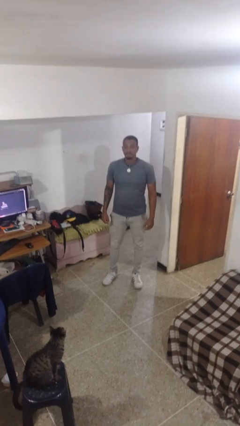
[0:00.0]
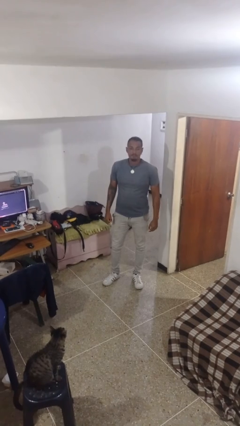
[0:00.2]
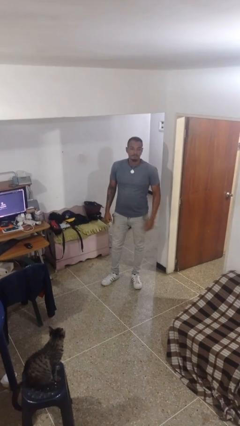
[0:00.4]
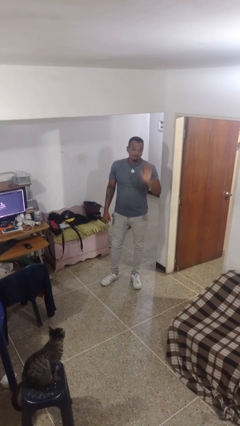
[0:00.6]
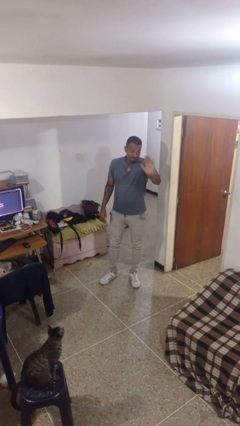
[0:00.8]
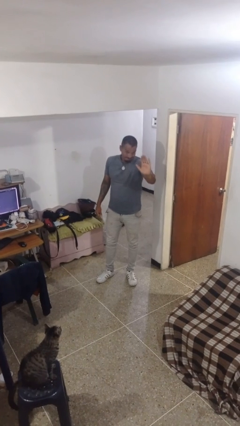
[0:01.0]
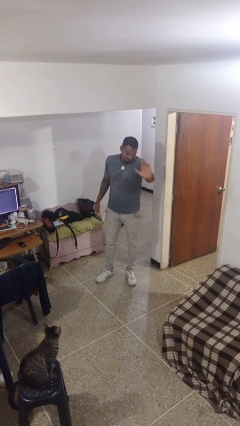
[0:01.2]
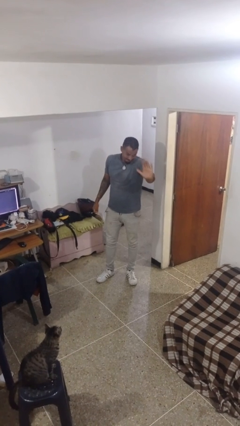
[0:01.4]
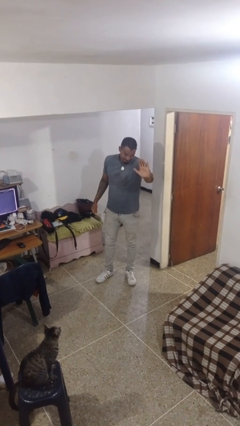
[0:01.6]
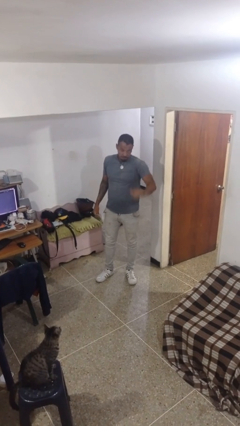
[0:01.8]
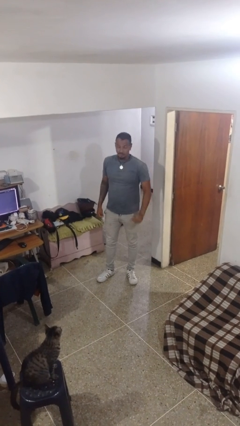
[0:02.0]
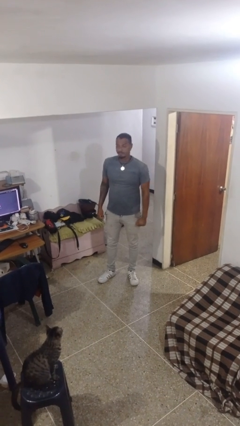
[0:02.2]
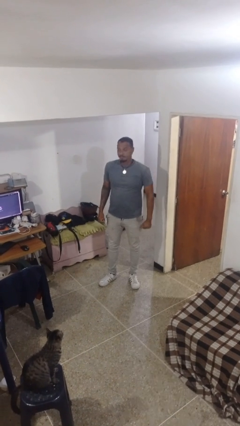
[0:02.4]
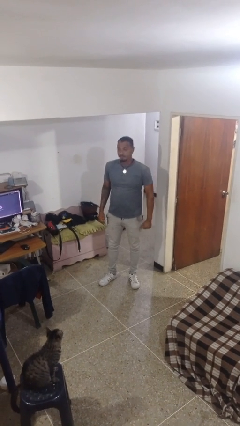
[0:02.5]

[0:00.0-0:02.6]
person gestures stop

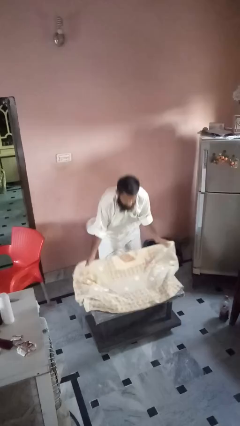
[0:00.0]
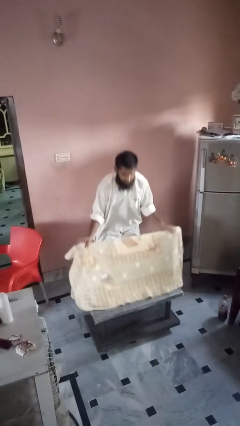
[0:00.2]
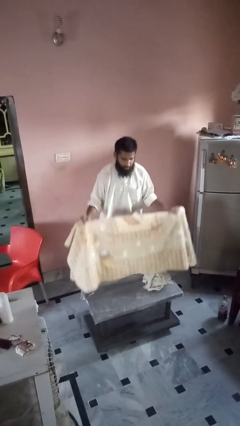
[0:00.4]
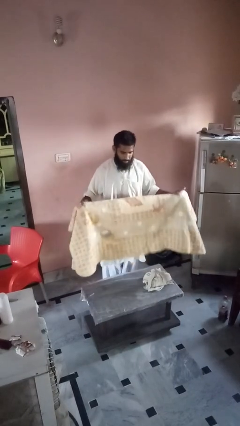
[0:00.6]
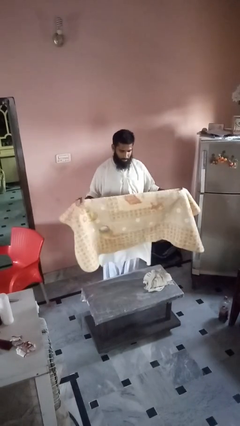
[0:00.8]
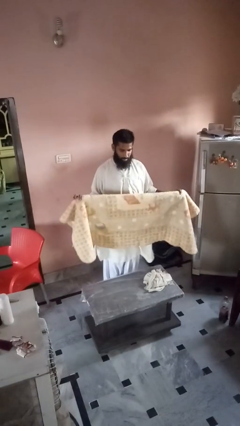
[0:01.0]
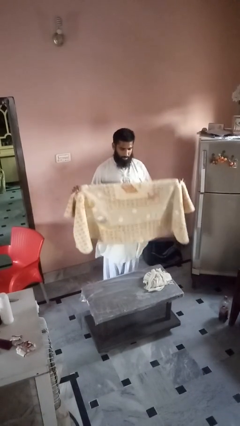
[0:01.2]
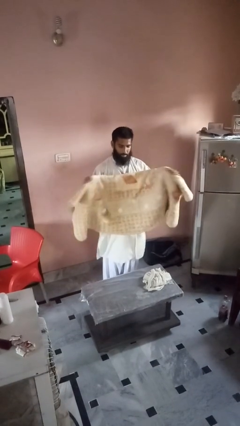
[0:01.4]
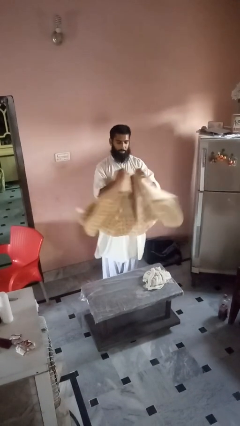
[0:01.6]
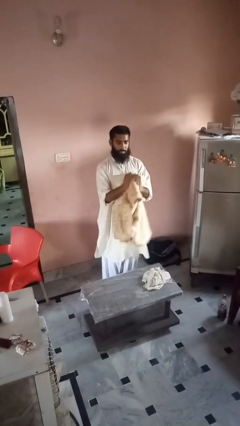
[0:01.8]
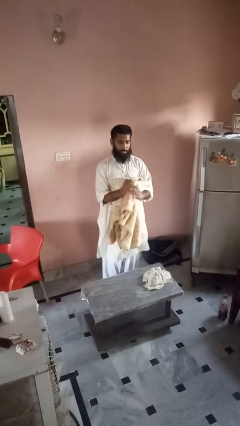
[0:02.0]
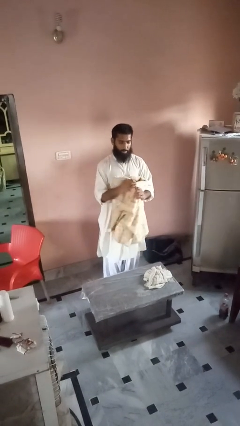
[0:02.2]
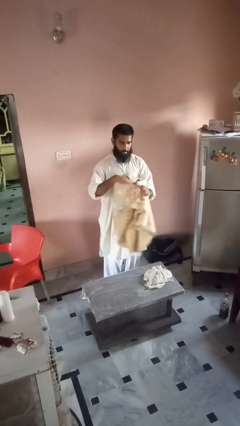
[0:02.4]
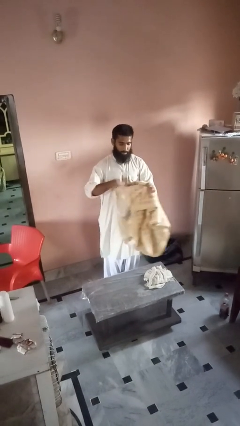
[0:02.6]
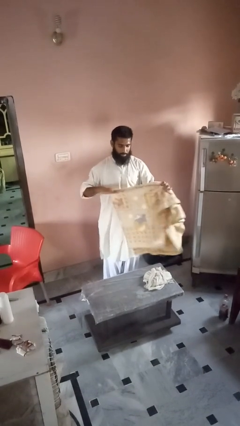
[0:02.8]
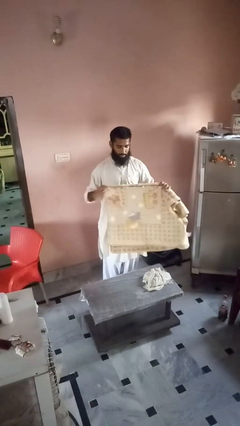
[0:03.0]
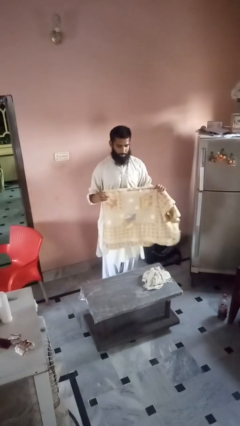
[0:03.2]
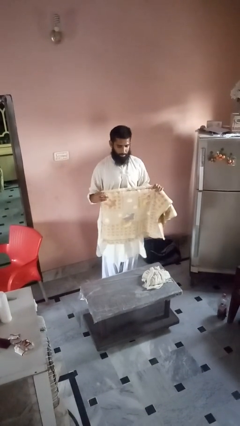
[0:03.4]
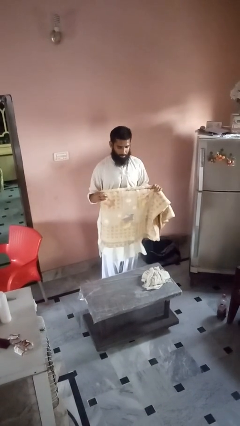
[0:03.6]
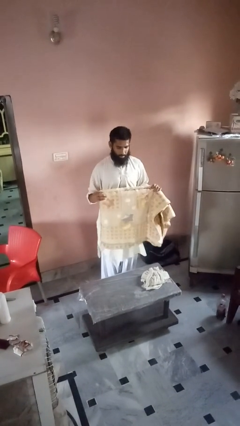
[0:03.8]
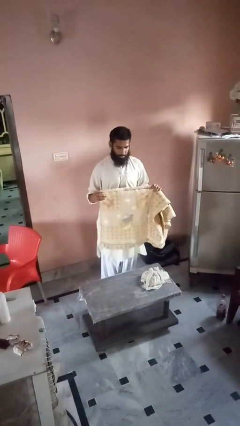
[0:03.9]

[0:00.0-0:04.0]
person folds blanket

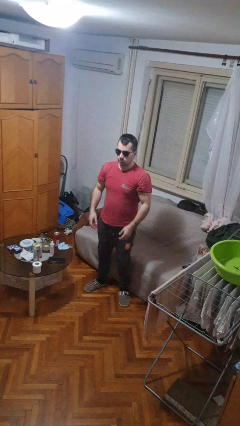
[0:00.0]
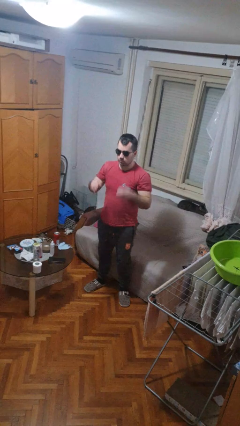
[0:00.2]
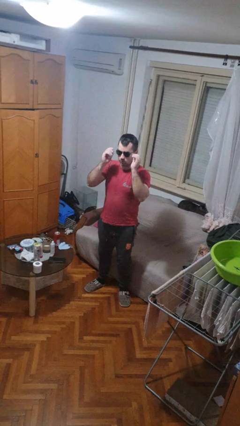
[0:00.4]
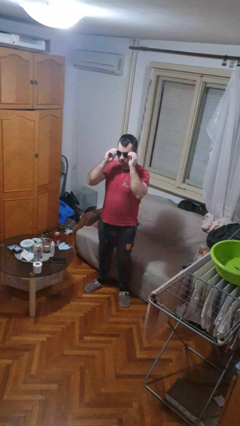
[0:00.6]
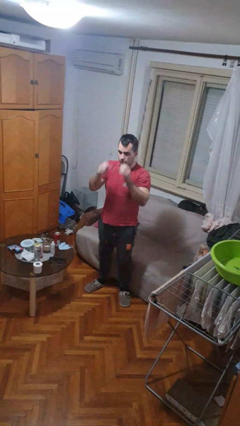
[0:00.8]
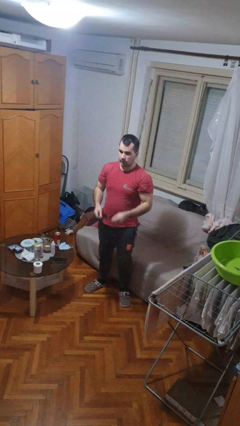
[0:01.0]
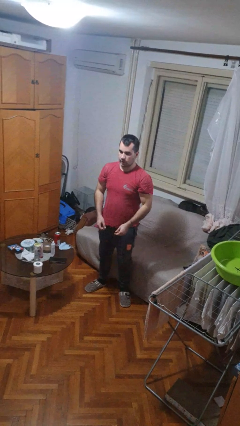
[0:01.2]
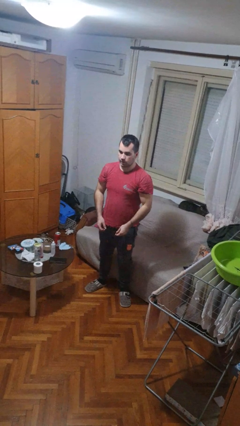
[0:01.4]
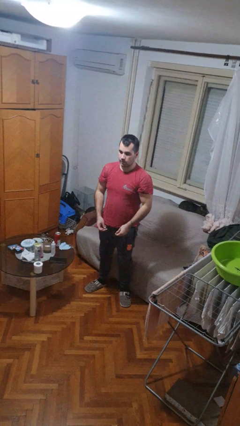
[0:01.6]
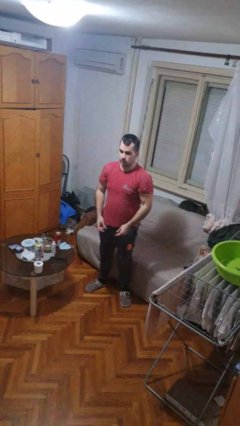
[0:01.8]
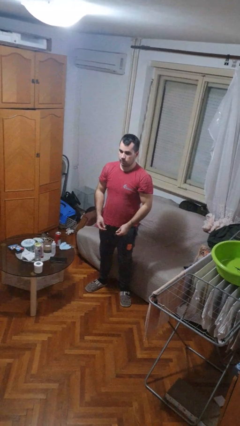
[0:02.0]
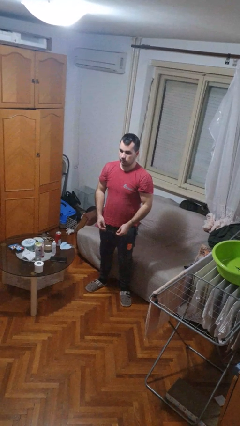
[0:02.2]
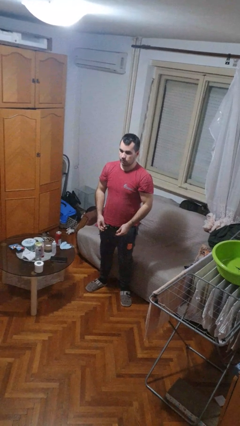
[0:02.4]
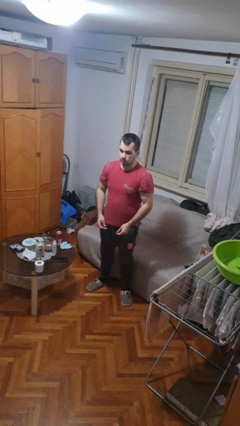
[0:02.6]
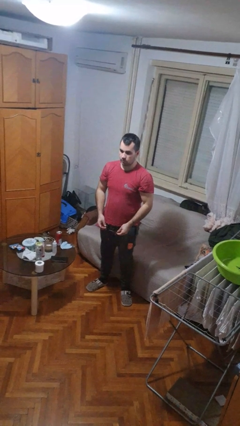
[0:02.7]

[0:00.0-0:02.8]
person takes off sunglasses

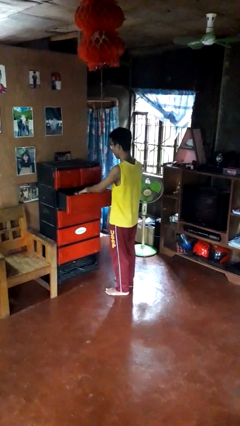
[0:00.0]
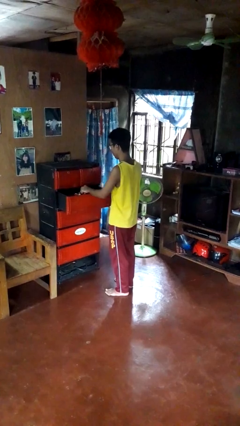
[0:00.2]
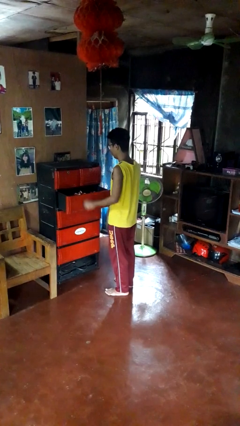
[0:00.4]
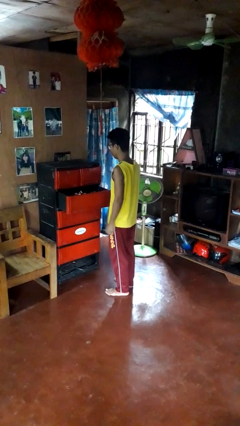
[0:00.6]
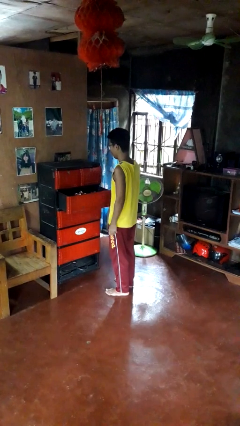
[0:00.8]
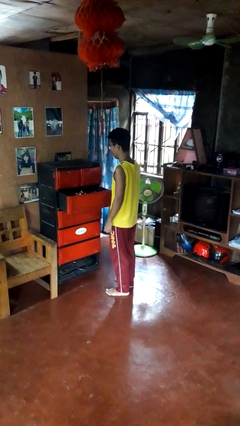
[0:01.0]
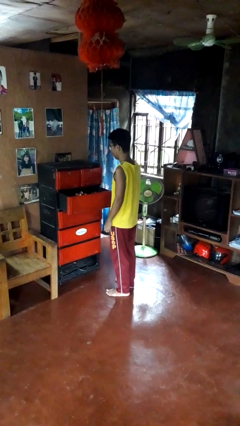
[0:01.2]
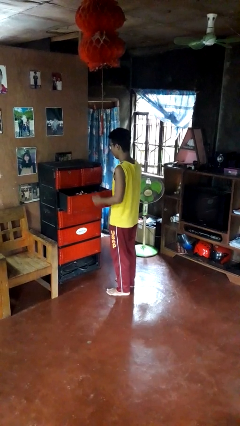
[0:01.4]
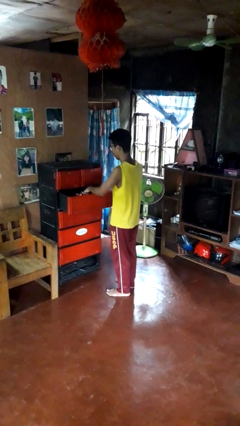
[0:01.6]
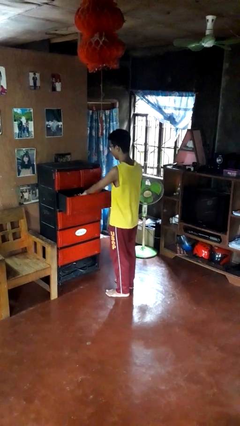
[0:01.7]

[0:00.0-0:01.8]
person puts clothes into dresser

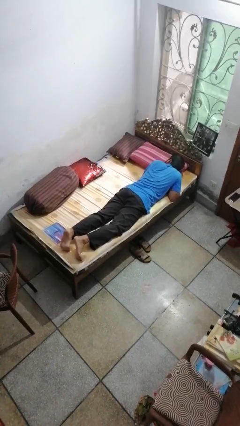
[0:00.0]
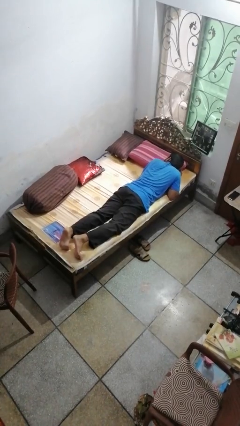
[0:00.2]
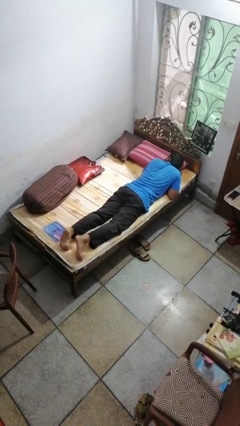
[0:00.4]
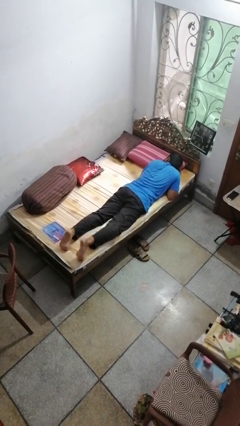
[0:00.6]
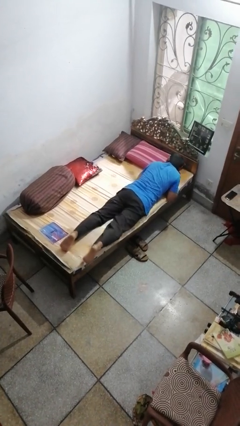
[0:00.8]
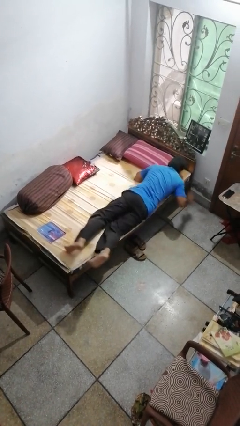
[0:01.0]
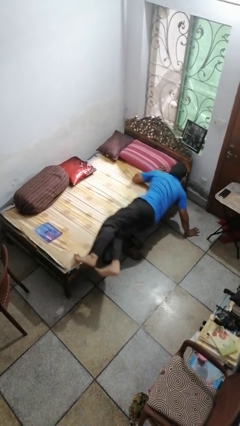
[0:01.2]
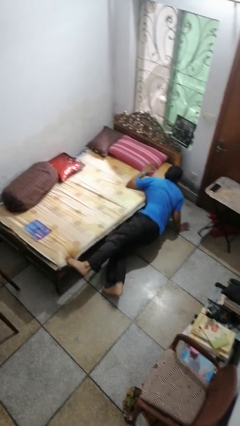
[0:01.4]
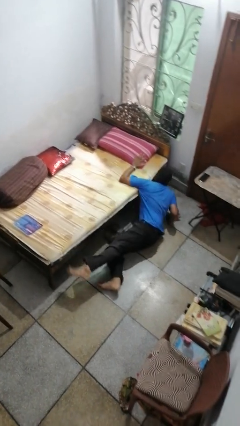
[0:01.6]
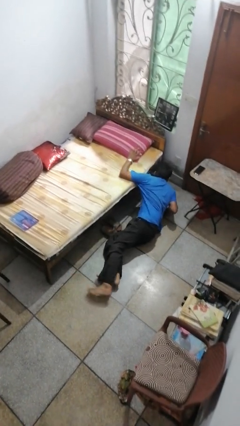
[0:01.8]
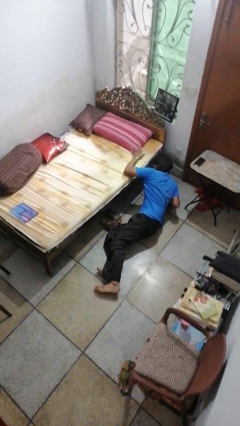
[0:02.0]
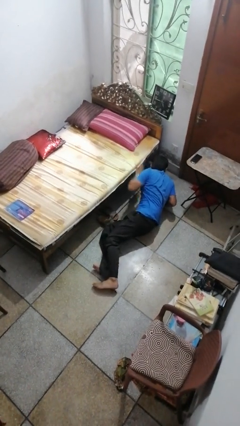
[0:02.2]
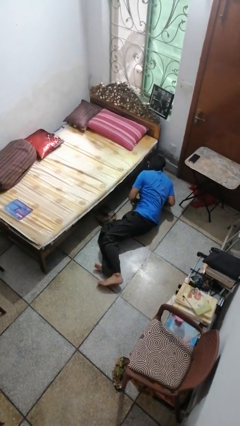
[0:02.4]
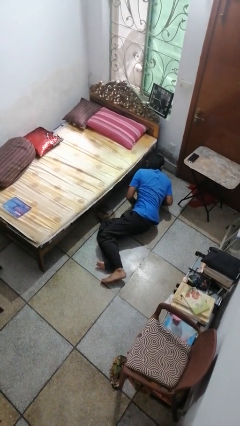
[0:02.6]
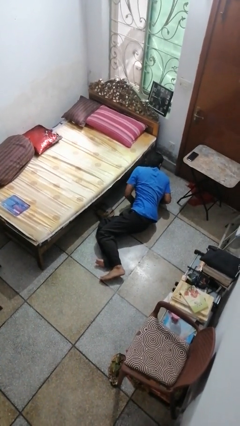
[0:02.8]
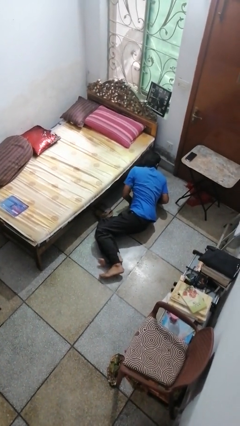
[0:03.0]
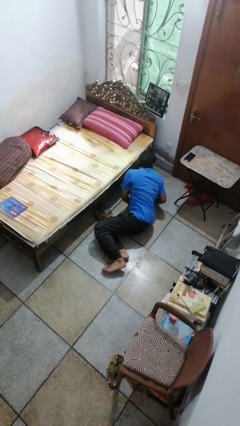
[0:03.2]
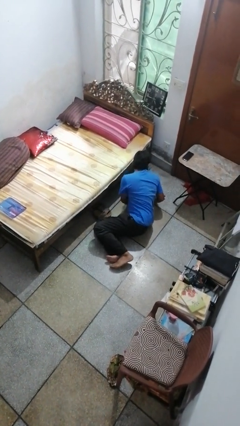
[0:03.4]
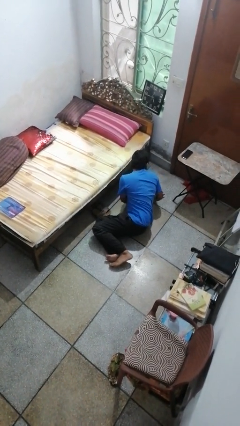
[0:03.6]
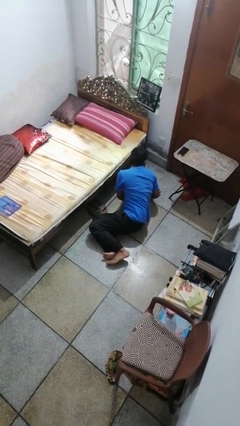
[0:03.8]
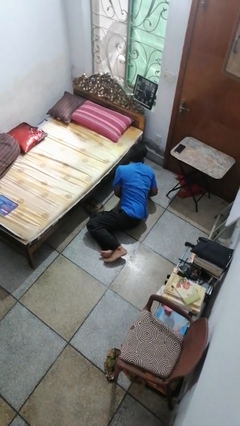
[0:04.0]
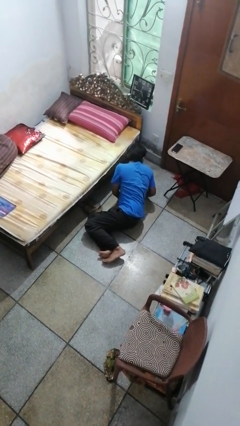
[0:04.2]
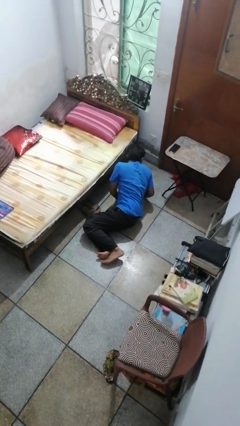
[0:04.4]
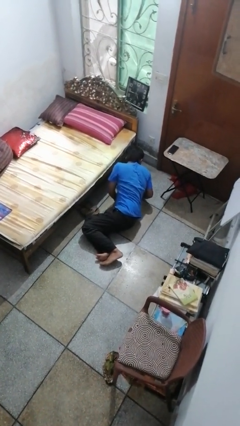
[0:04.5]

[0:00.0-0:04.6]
person falls from bed

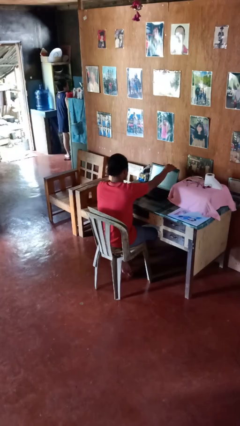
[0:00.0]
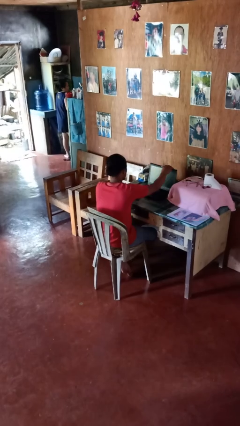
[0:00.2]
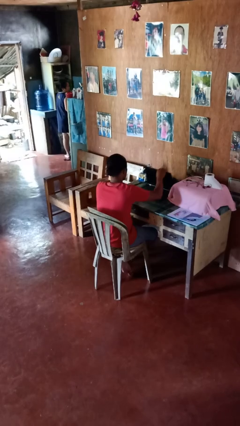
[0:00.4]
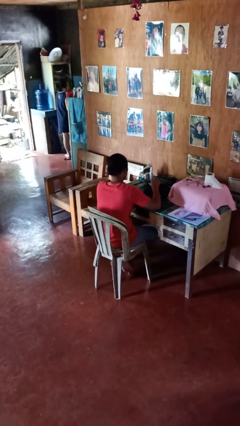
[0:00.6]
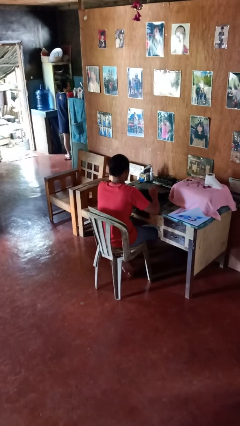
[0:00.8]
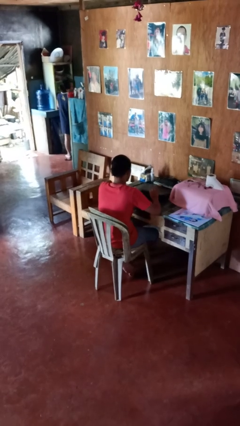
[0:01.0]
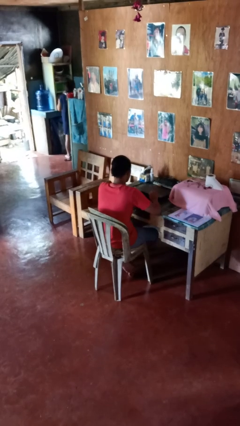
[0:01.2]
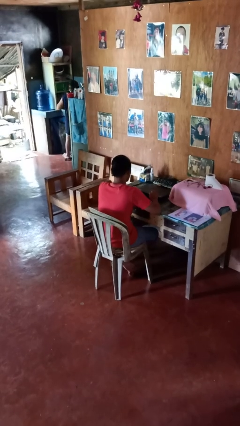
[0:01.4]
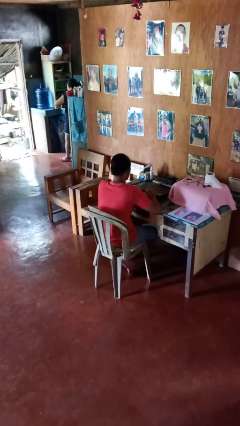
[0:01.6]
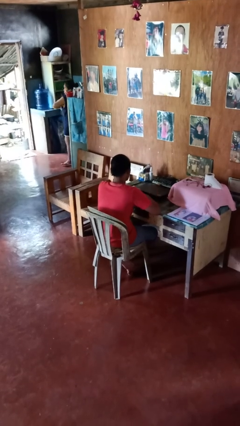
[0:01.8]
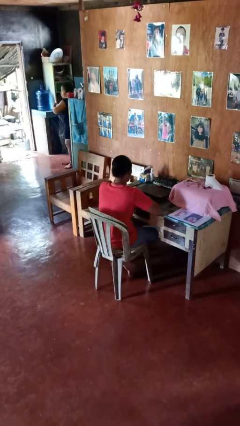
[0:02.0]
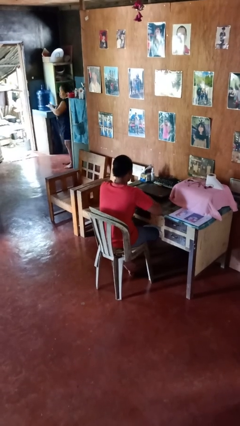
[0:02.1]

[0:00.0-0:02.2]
person closes laptop
